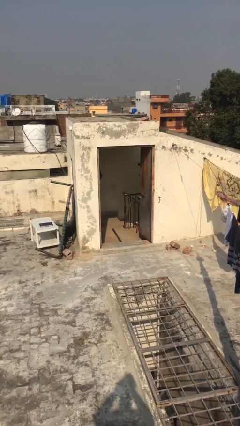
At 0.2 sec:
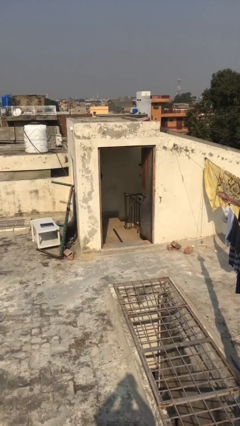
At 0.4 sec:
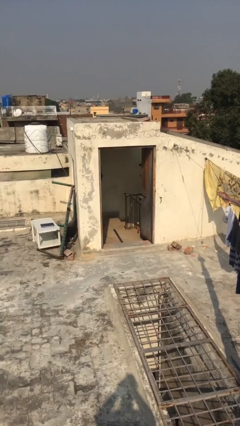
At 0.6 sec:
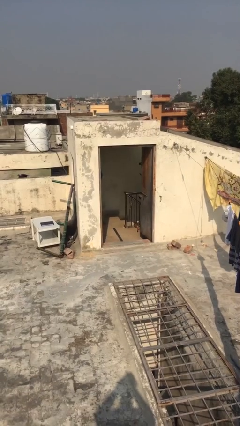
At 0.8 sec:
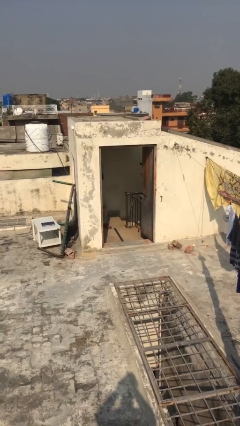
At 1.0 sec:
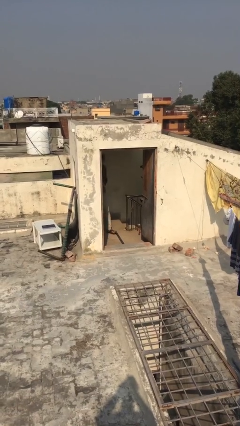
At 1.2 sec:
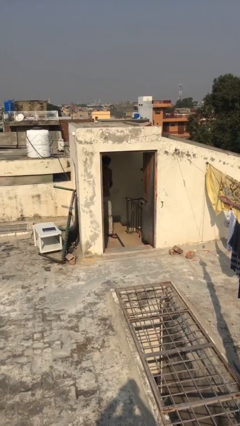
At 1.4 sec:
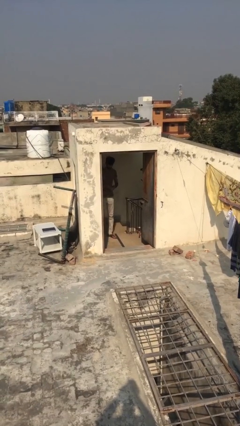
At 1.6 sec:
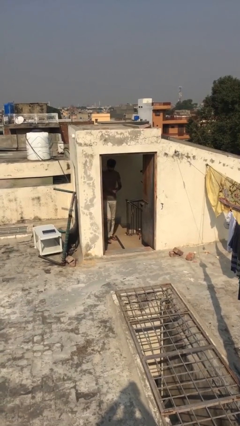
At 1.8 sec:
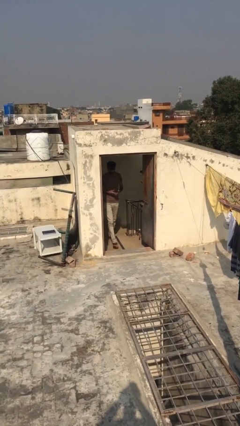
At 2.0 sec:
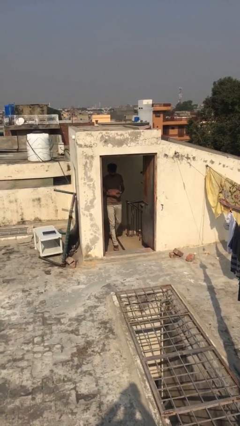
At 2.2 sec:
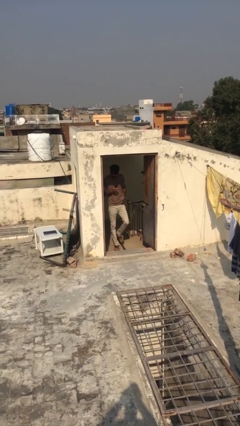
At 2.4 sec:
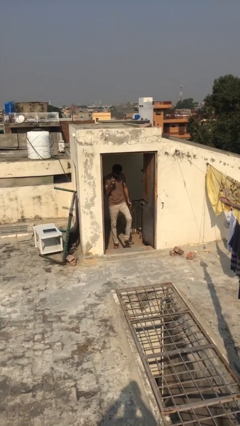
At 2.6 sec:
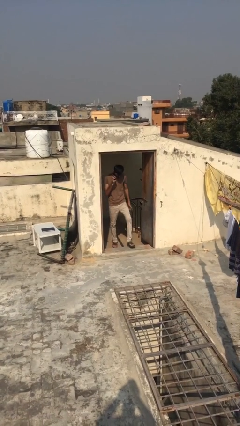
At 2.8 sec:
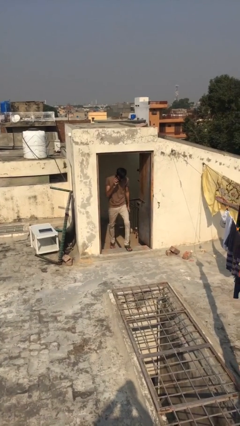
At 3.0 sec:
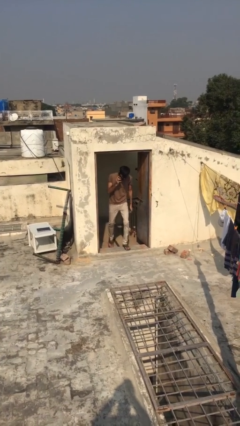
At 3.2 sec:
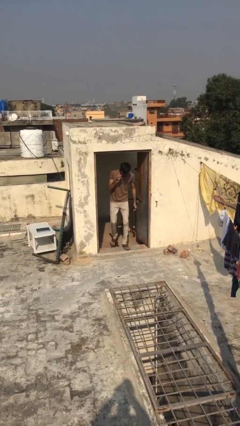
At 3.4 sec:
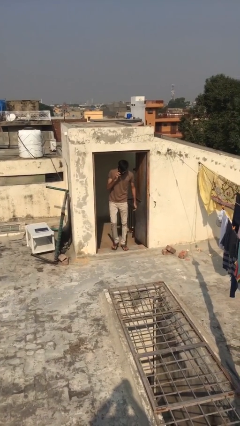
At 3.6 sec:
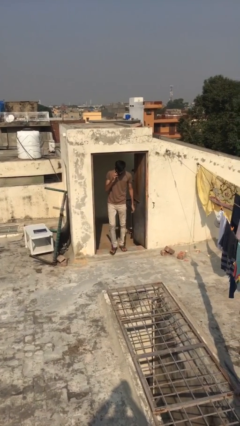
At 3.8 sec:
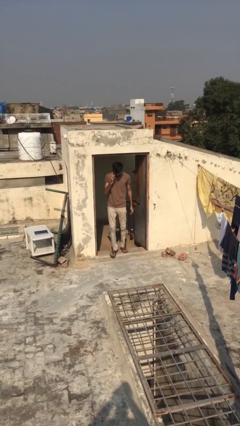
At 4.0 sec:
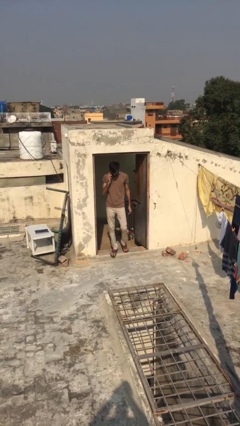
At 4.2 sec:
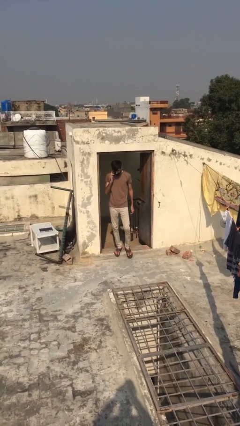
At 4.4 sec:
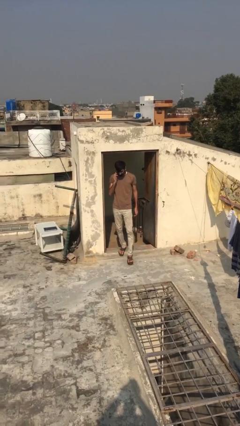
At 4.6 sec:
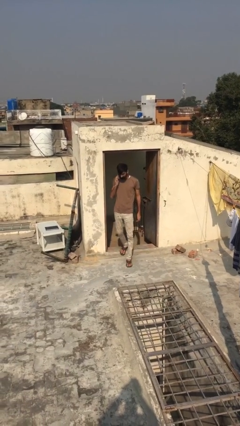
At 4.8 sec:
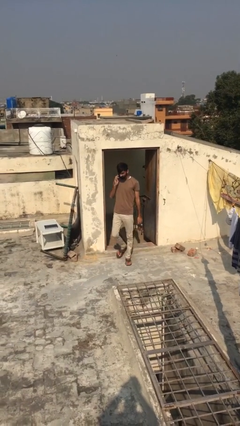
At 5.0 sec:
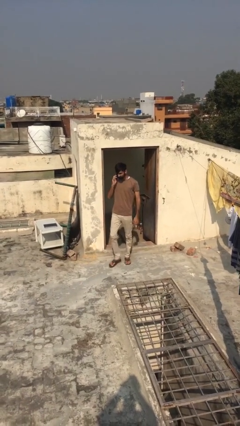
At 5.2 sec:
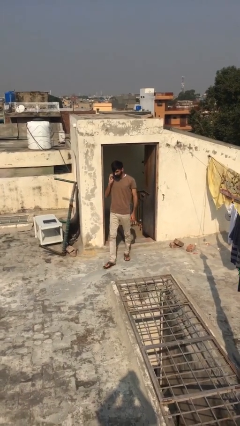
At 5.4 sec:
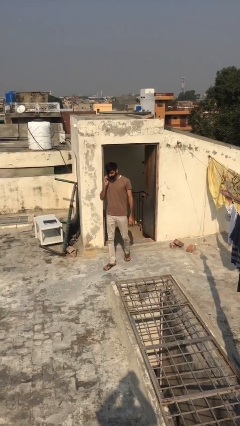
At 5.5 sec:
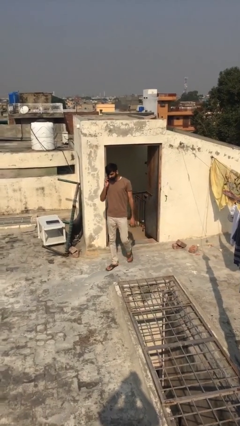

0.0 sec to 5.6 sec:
person enters scene through structure

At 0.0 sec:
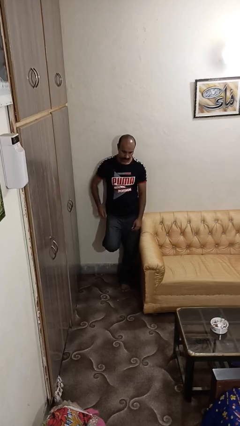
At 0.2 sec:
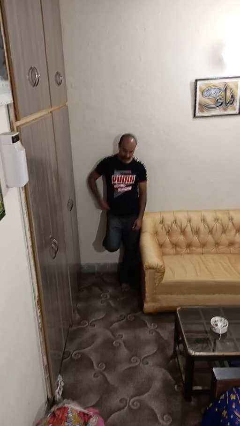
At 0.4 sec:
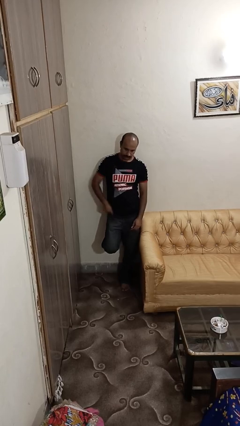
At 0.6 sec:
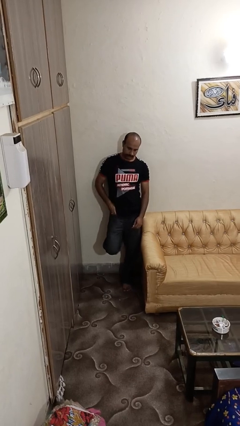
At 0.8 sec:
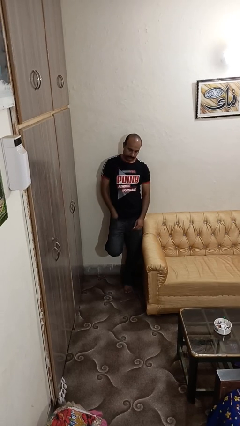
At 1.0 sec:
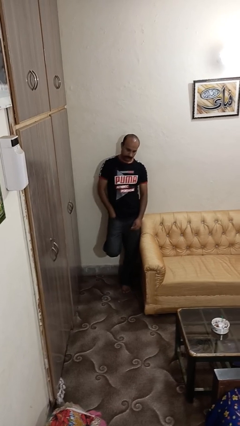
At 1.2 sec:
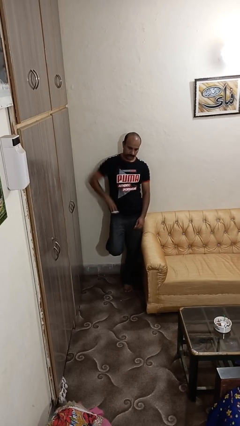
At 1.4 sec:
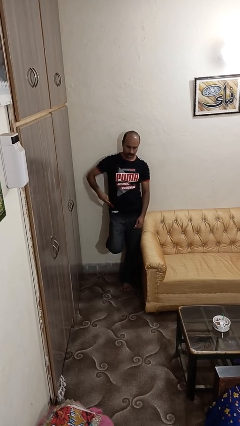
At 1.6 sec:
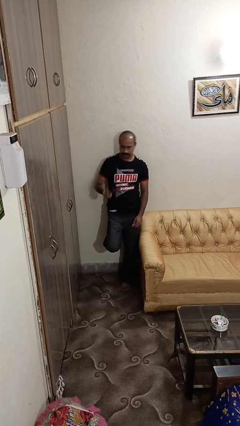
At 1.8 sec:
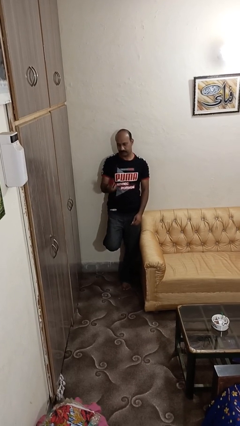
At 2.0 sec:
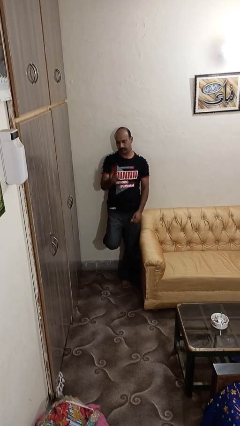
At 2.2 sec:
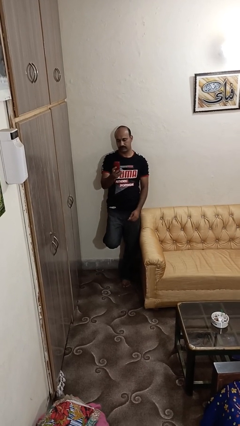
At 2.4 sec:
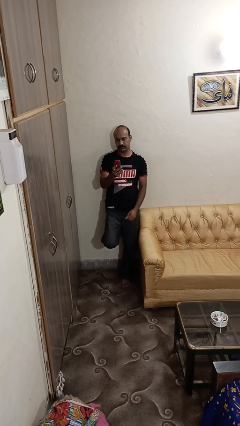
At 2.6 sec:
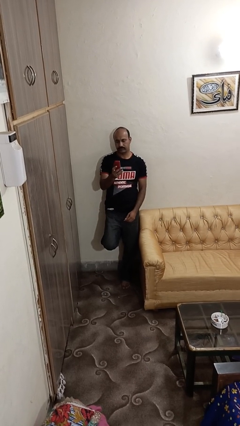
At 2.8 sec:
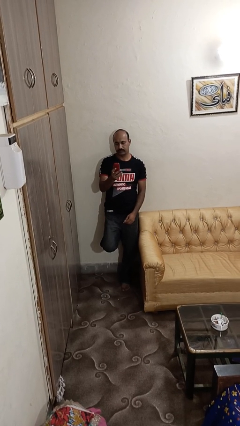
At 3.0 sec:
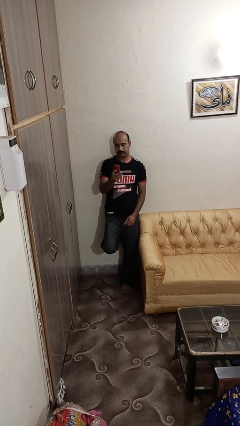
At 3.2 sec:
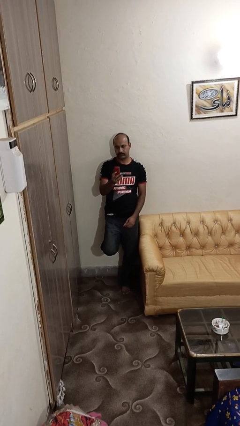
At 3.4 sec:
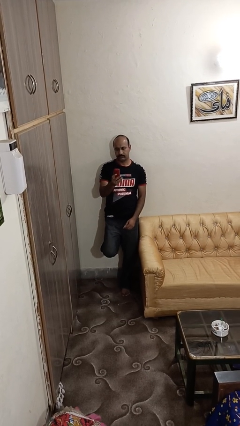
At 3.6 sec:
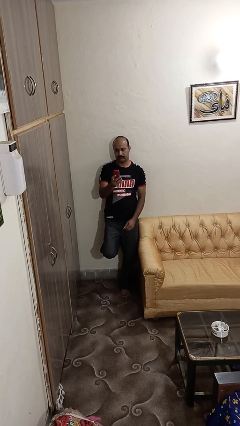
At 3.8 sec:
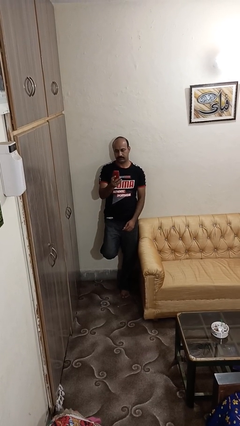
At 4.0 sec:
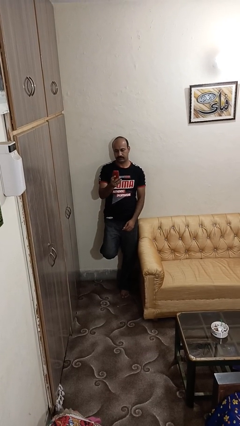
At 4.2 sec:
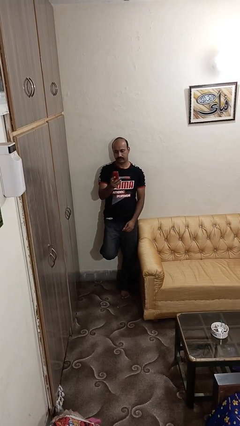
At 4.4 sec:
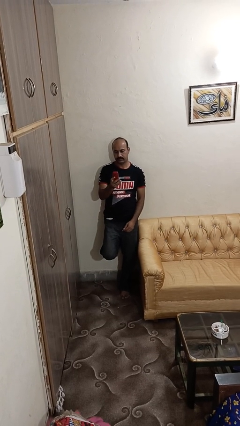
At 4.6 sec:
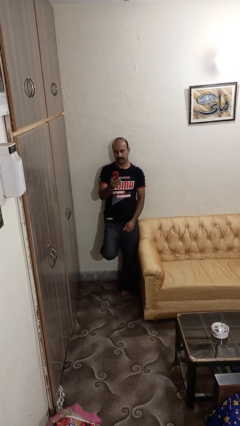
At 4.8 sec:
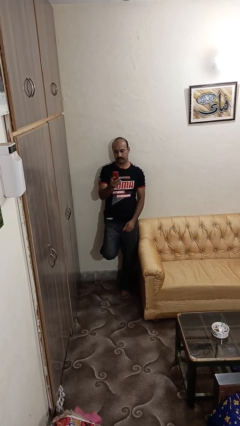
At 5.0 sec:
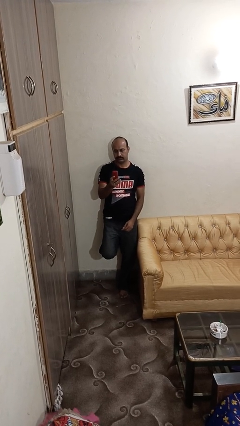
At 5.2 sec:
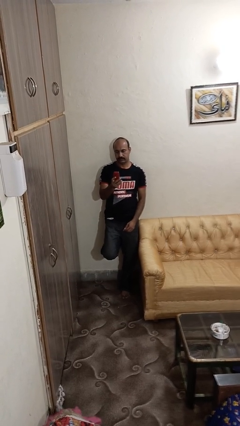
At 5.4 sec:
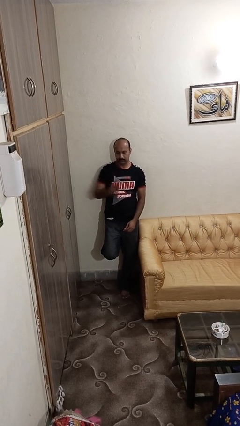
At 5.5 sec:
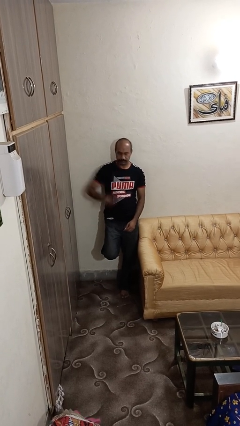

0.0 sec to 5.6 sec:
person takes phone from pocket

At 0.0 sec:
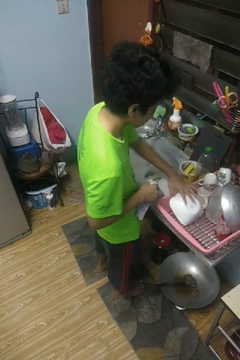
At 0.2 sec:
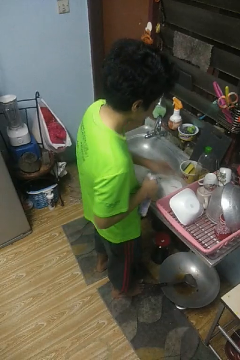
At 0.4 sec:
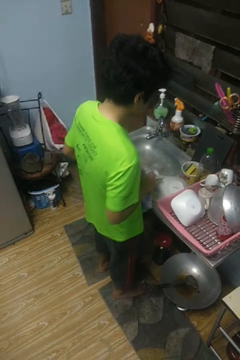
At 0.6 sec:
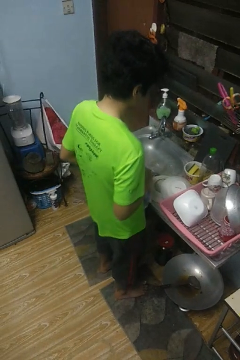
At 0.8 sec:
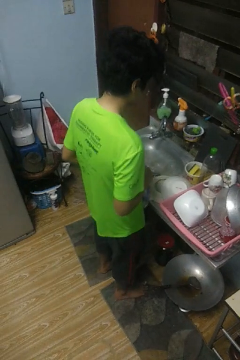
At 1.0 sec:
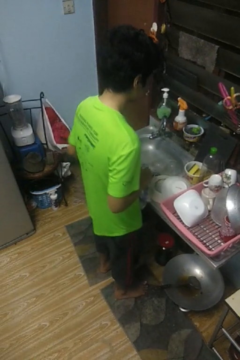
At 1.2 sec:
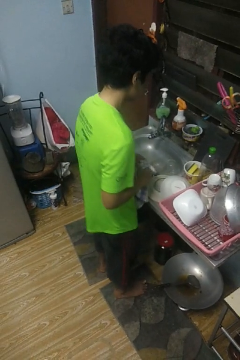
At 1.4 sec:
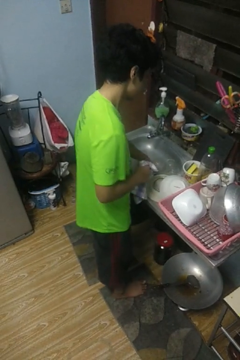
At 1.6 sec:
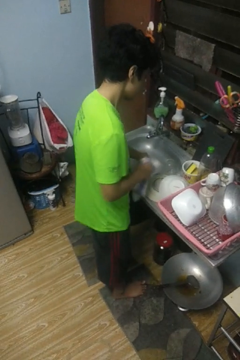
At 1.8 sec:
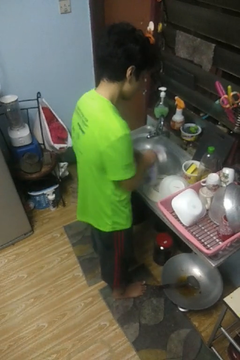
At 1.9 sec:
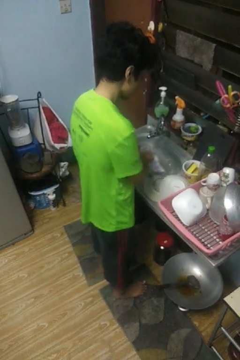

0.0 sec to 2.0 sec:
person dries dish

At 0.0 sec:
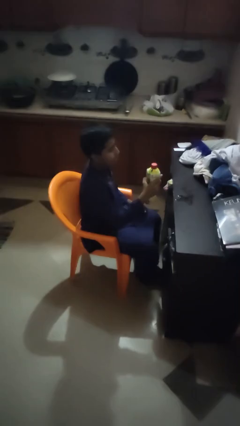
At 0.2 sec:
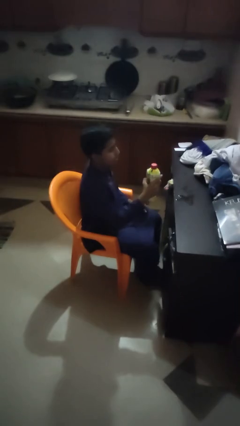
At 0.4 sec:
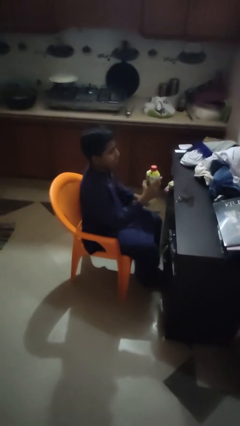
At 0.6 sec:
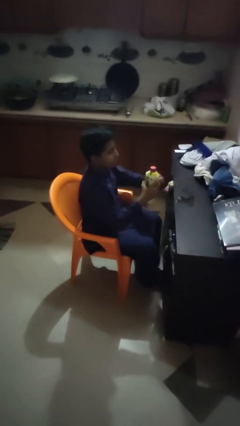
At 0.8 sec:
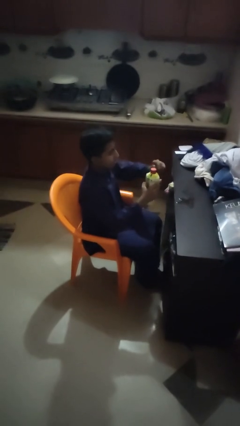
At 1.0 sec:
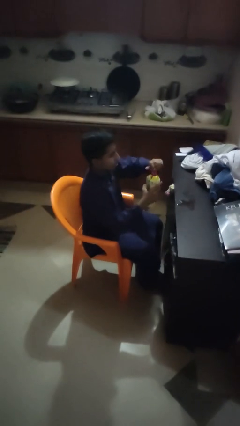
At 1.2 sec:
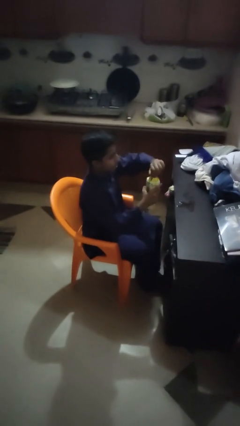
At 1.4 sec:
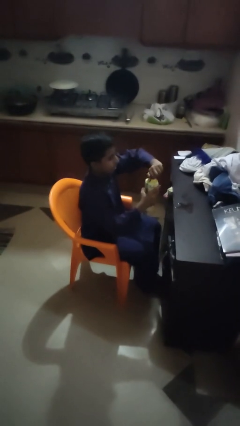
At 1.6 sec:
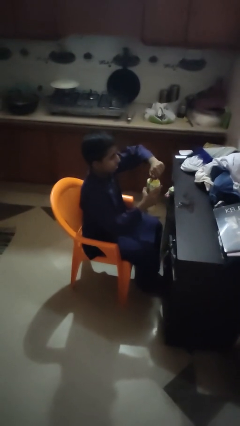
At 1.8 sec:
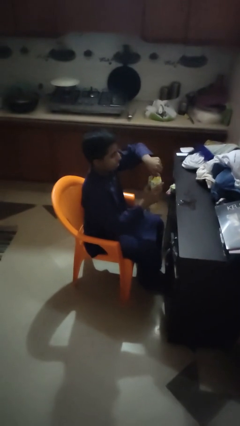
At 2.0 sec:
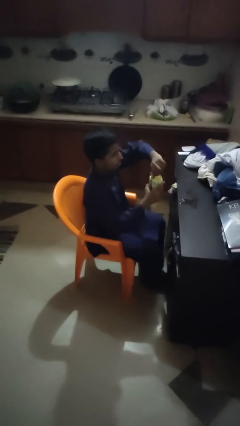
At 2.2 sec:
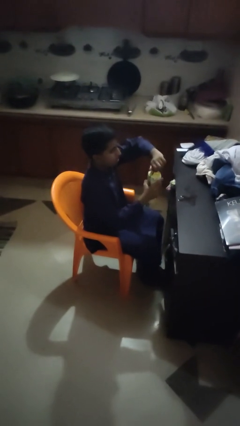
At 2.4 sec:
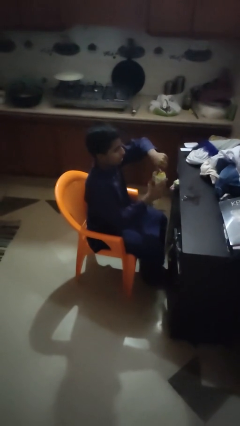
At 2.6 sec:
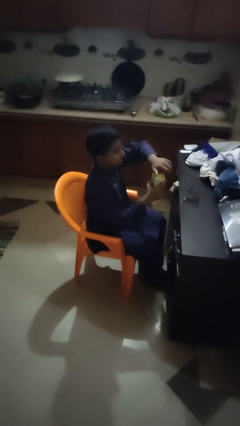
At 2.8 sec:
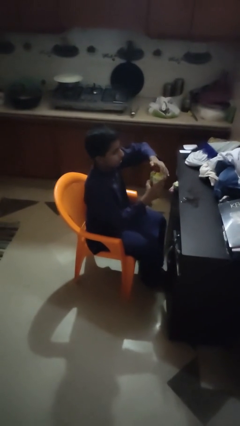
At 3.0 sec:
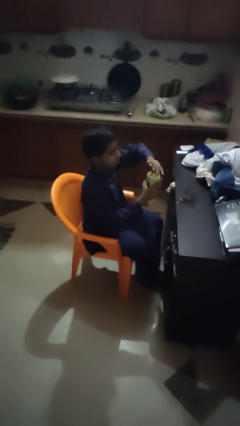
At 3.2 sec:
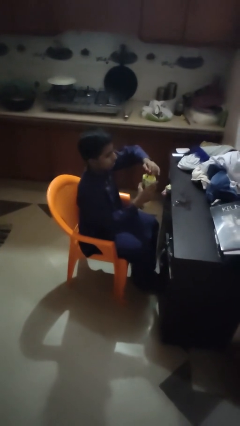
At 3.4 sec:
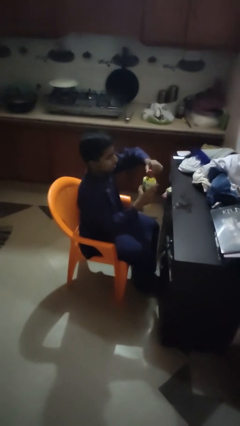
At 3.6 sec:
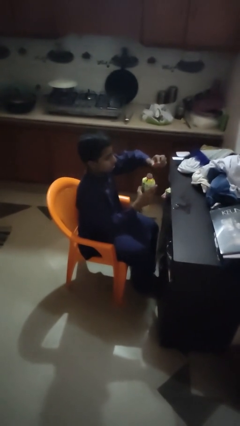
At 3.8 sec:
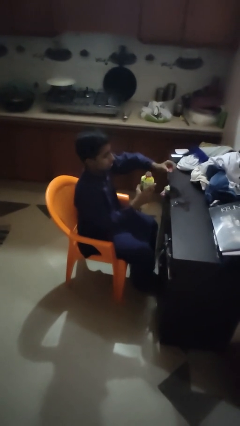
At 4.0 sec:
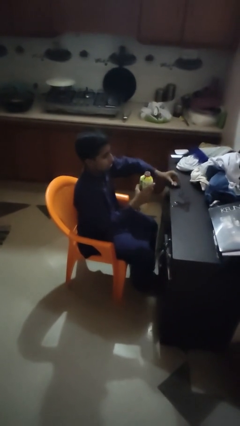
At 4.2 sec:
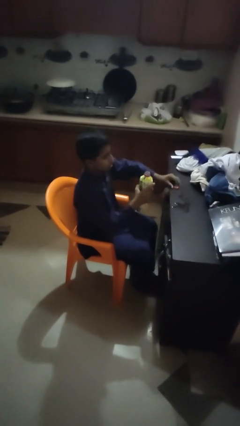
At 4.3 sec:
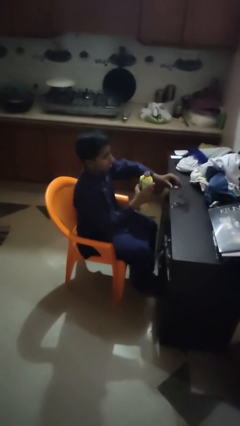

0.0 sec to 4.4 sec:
person unscrews lid from bottle

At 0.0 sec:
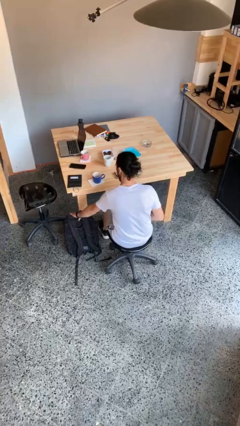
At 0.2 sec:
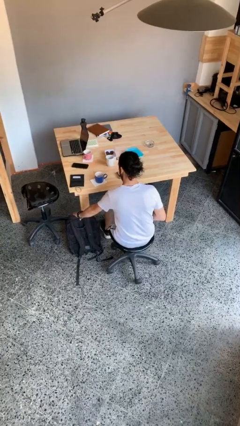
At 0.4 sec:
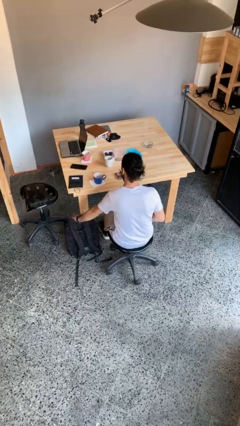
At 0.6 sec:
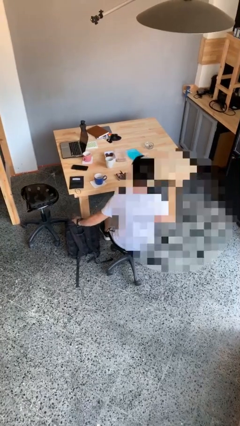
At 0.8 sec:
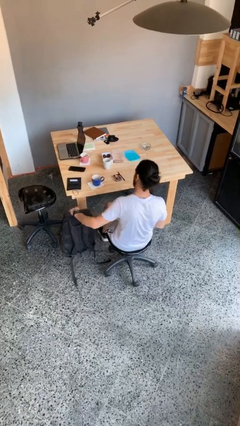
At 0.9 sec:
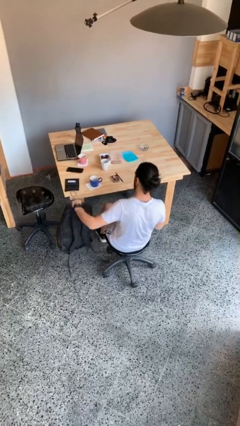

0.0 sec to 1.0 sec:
person picks up object from floor
